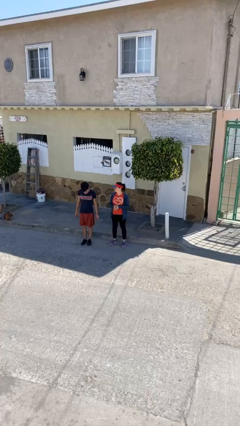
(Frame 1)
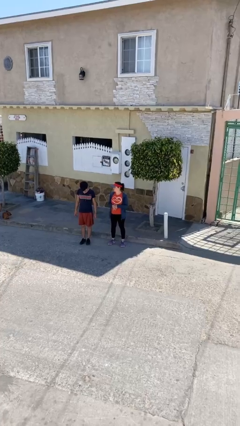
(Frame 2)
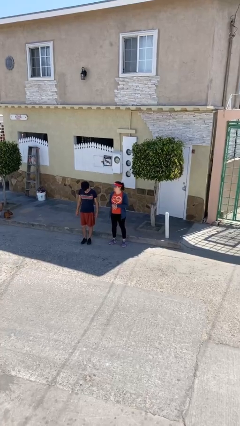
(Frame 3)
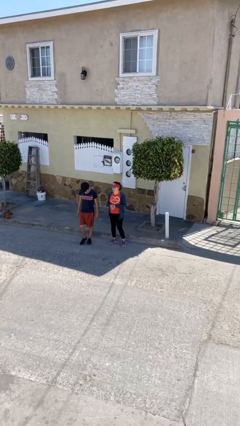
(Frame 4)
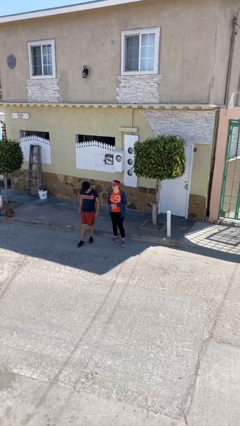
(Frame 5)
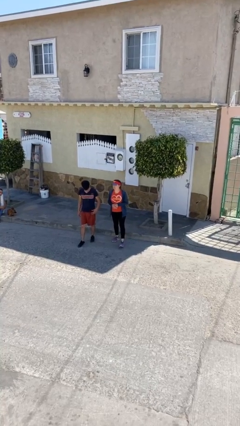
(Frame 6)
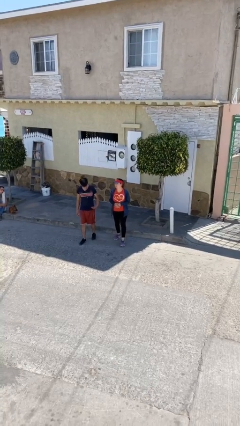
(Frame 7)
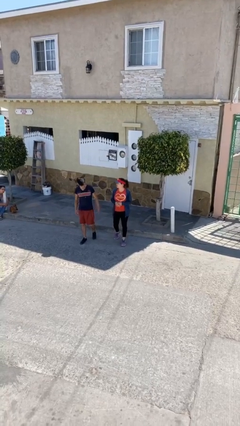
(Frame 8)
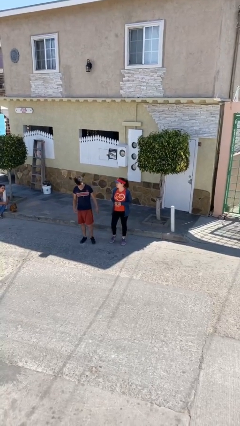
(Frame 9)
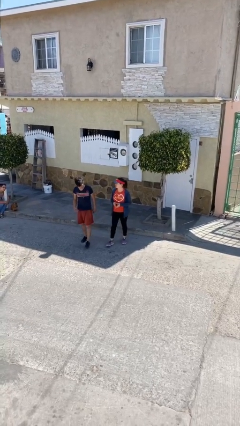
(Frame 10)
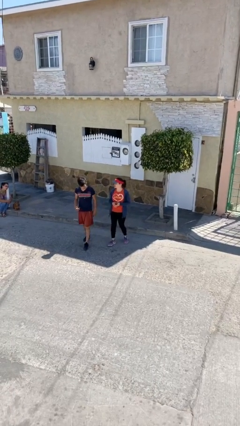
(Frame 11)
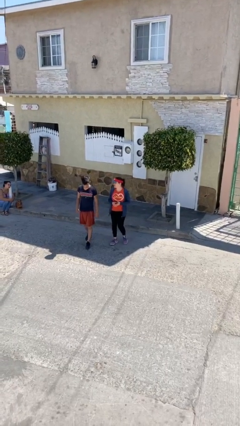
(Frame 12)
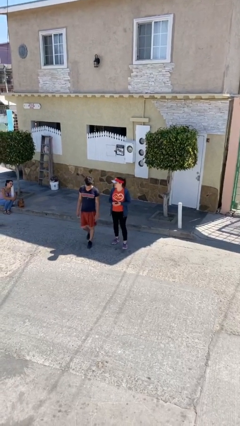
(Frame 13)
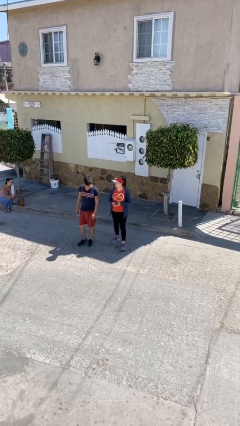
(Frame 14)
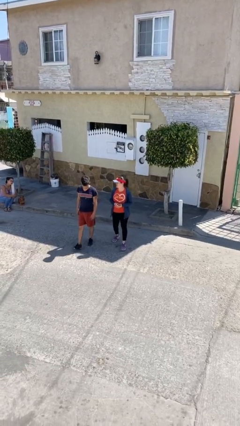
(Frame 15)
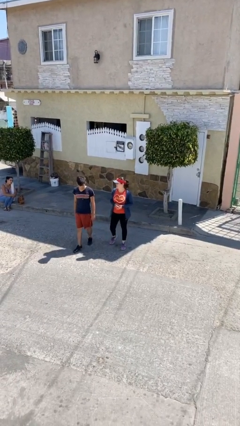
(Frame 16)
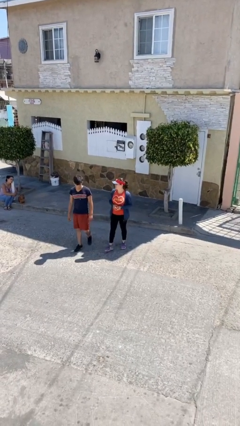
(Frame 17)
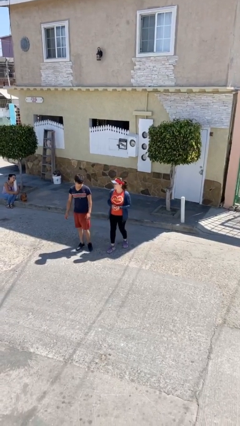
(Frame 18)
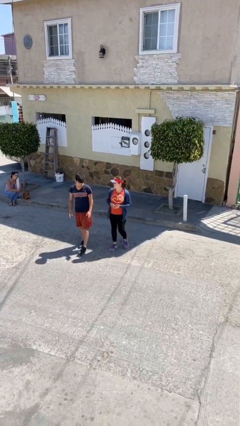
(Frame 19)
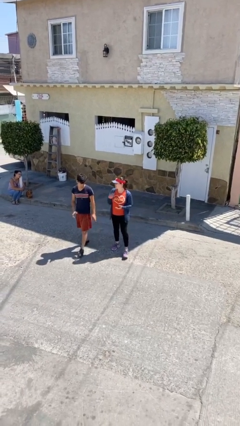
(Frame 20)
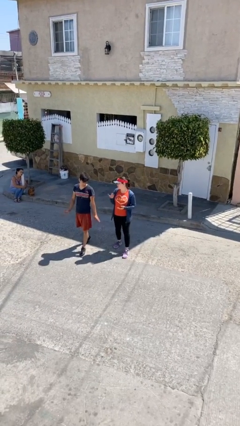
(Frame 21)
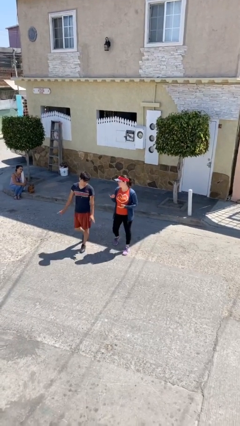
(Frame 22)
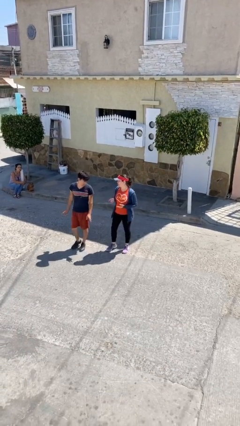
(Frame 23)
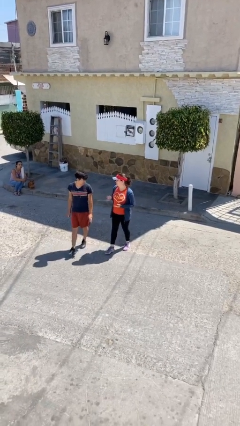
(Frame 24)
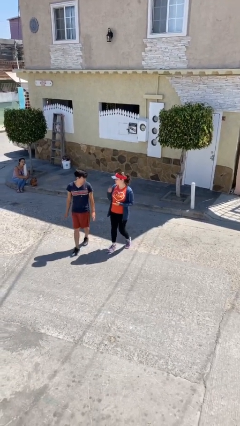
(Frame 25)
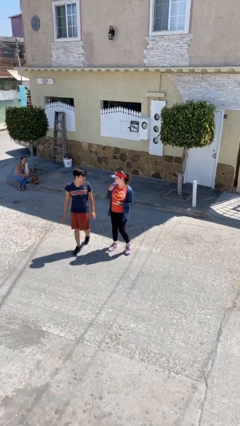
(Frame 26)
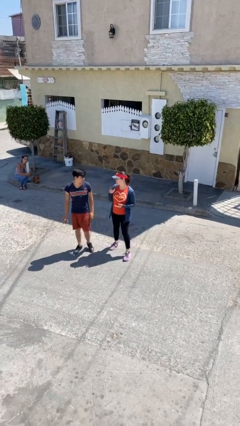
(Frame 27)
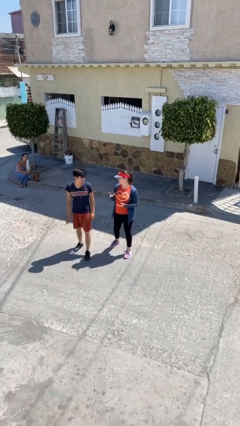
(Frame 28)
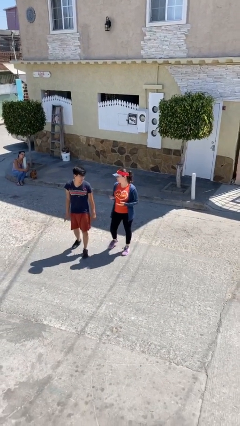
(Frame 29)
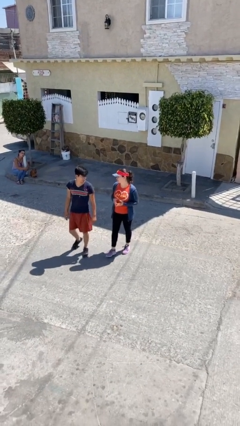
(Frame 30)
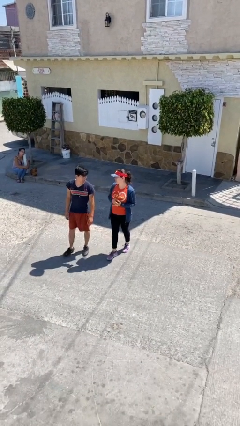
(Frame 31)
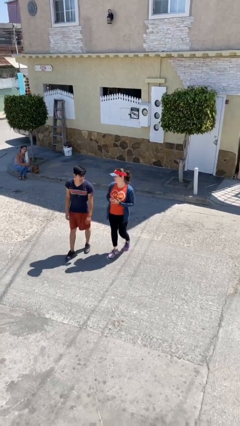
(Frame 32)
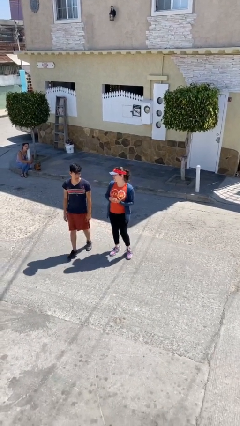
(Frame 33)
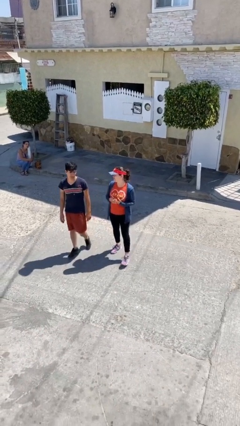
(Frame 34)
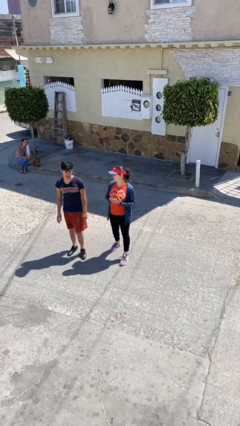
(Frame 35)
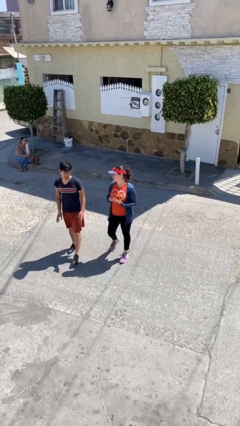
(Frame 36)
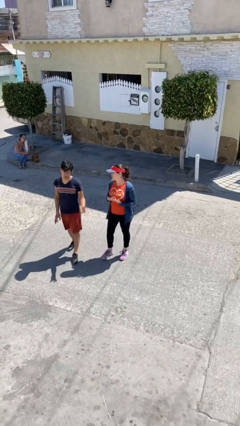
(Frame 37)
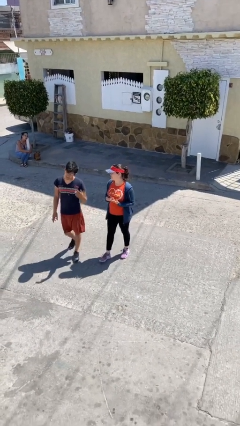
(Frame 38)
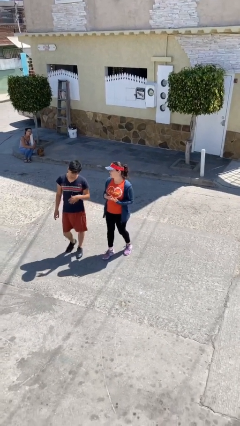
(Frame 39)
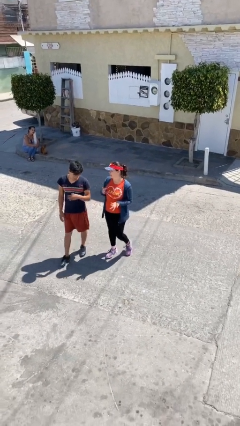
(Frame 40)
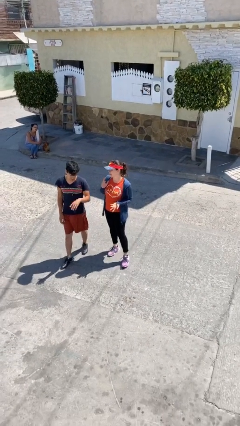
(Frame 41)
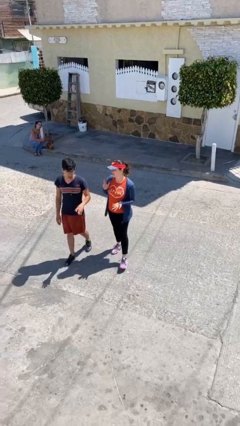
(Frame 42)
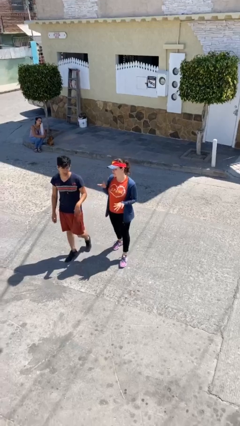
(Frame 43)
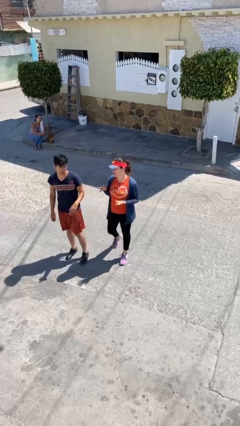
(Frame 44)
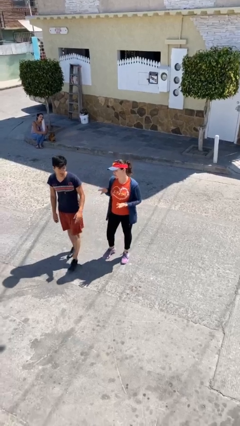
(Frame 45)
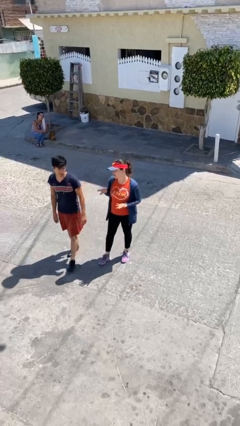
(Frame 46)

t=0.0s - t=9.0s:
person talks to person

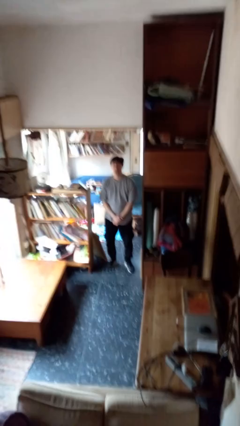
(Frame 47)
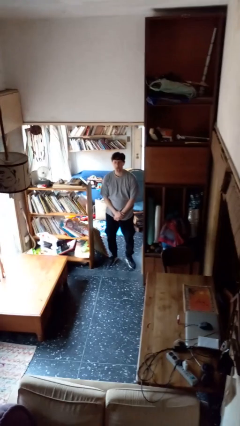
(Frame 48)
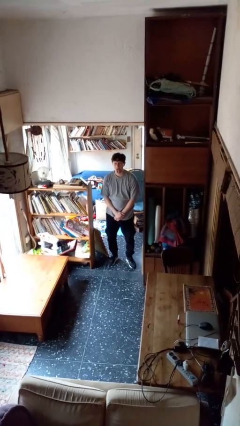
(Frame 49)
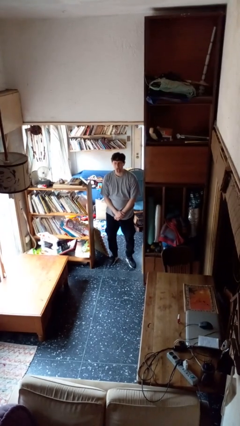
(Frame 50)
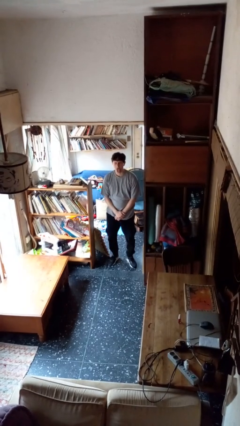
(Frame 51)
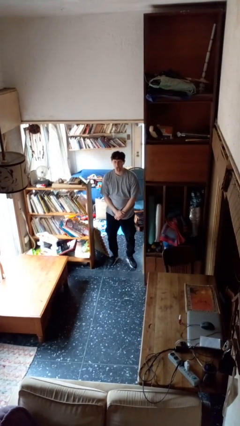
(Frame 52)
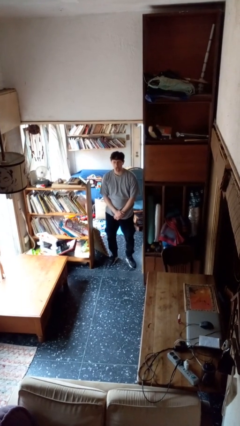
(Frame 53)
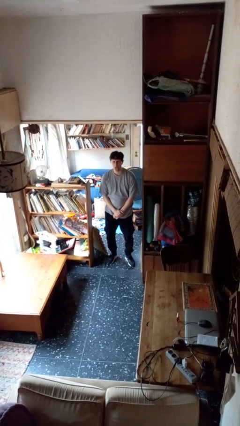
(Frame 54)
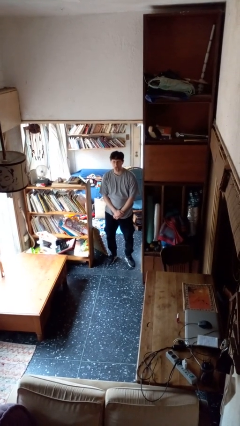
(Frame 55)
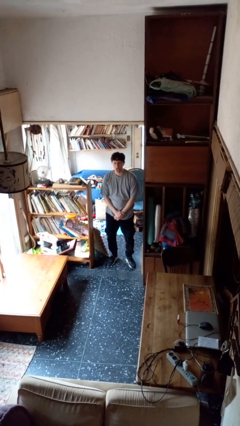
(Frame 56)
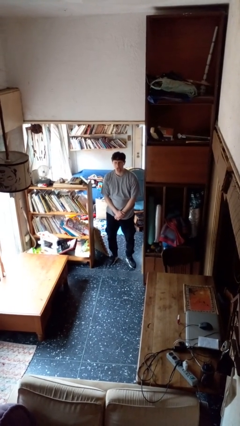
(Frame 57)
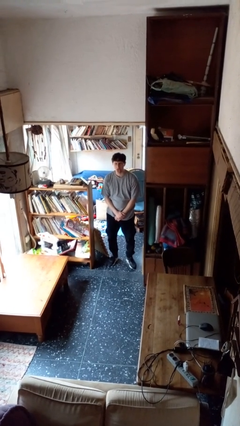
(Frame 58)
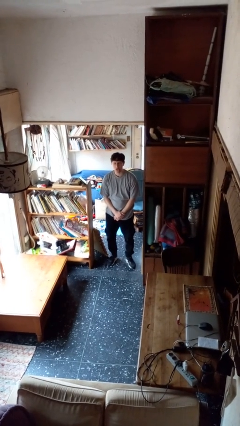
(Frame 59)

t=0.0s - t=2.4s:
person sticks out tongue

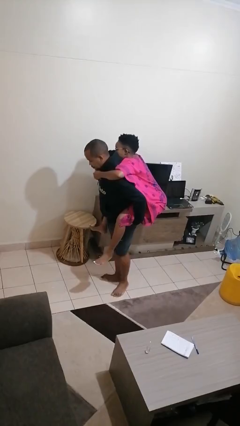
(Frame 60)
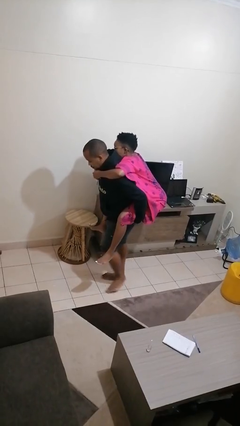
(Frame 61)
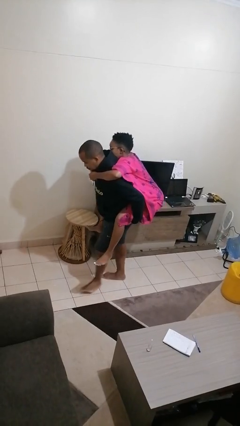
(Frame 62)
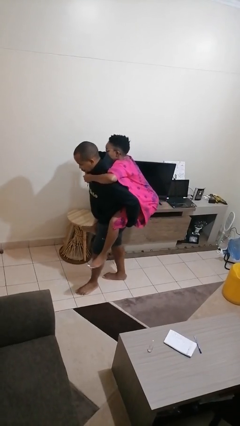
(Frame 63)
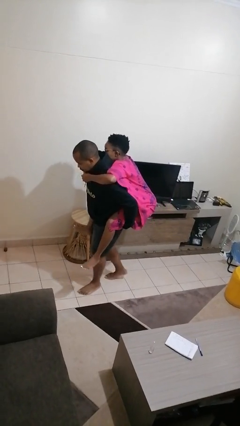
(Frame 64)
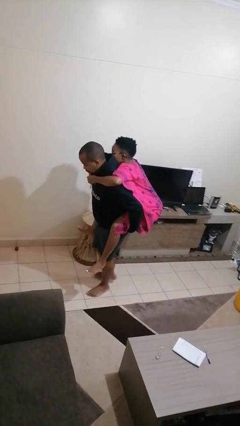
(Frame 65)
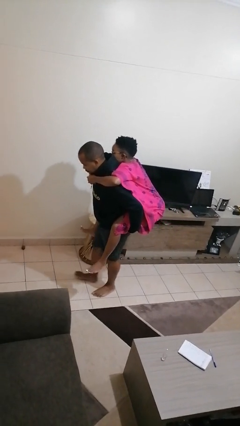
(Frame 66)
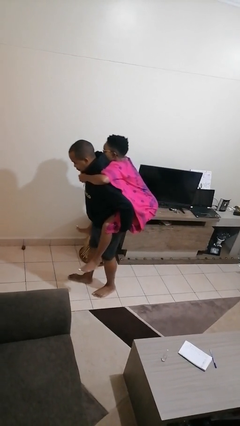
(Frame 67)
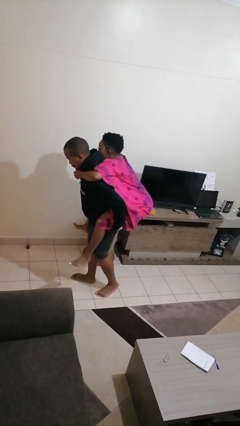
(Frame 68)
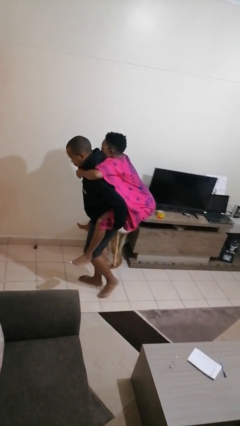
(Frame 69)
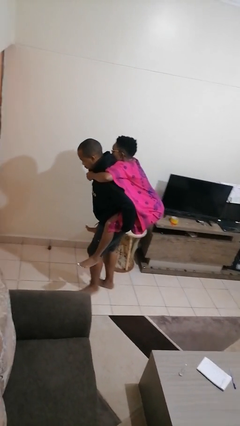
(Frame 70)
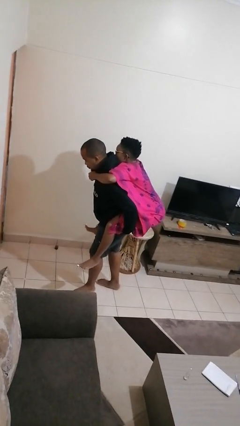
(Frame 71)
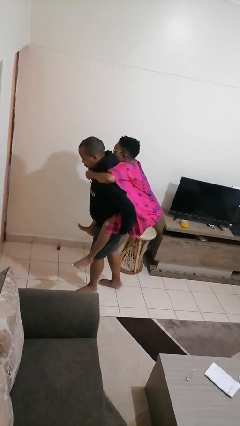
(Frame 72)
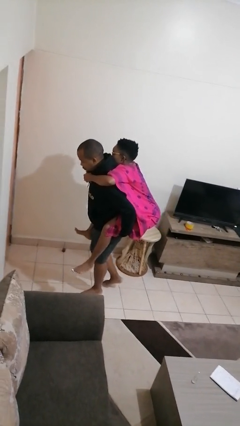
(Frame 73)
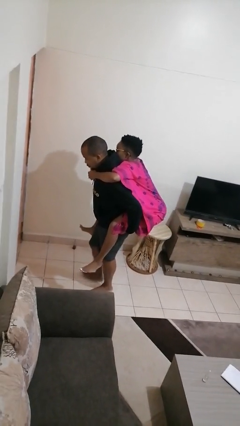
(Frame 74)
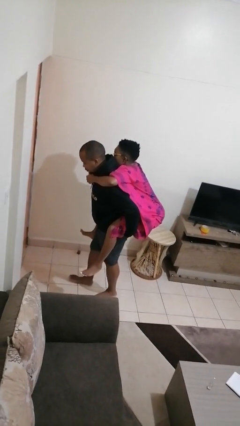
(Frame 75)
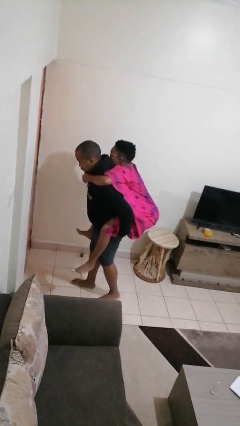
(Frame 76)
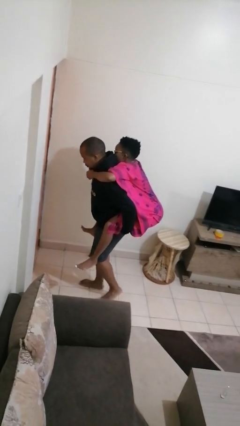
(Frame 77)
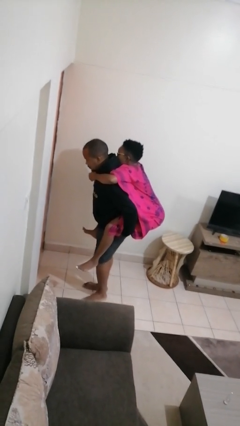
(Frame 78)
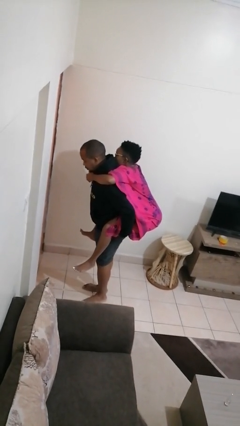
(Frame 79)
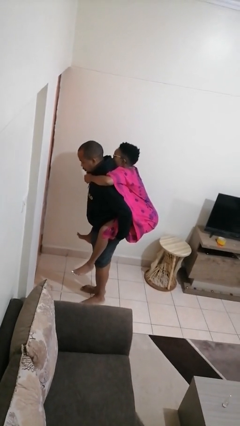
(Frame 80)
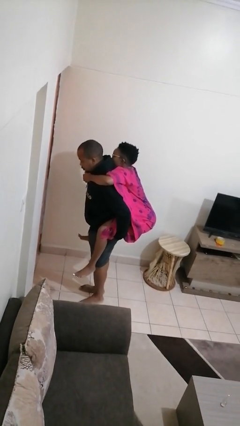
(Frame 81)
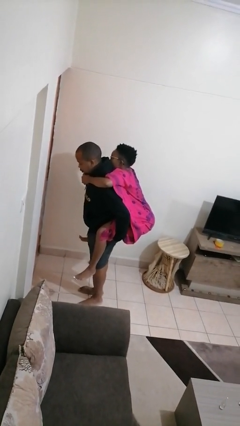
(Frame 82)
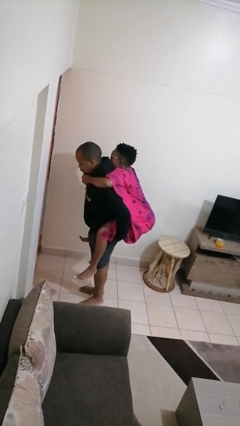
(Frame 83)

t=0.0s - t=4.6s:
person carries person on back

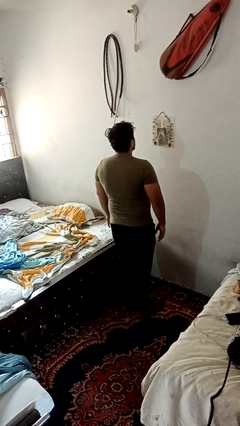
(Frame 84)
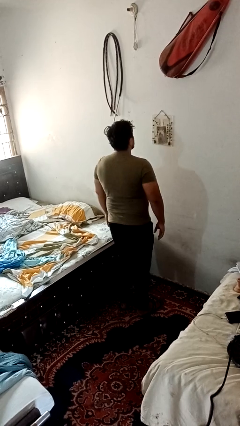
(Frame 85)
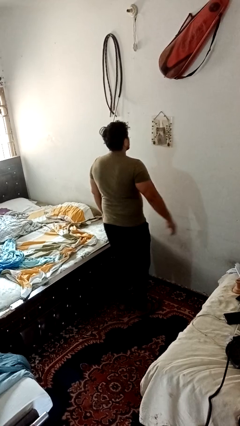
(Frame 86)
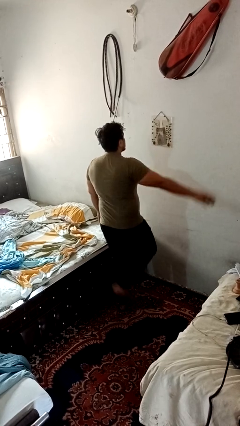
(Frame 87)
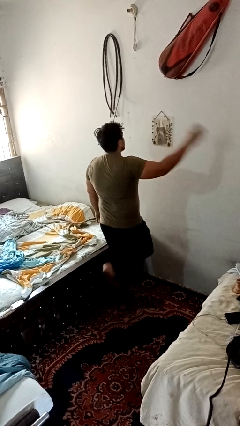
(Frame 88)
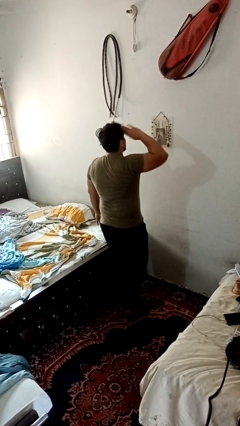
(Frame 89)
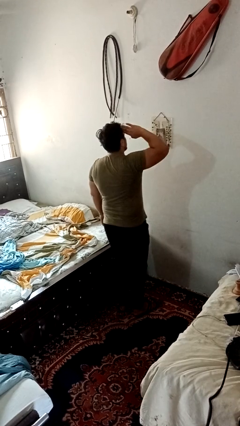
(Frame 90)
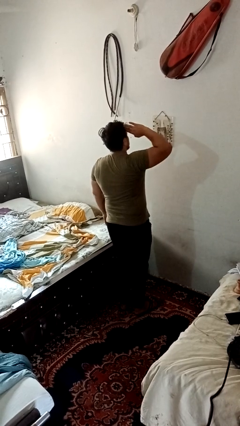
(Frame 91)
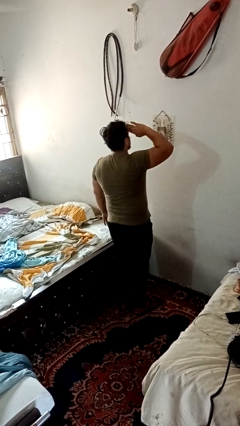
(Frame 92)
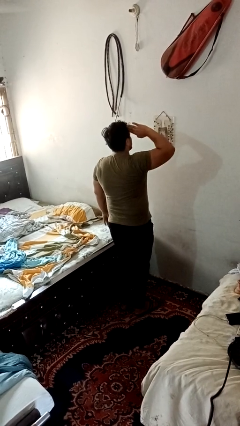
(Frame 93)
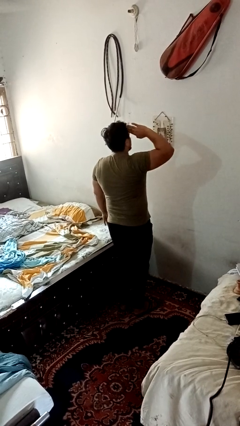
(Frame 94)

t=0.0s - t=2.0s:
person salutes

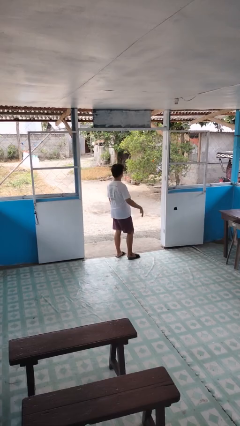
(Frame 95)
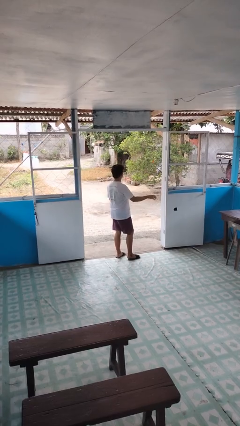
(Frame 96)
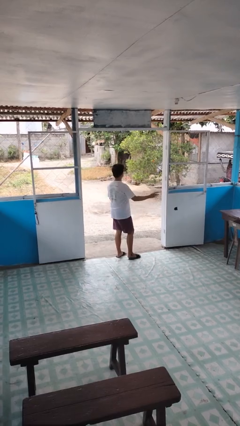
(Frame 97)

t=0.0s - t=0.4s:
person slaps hands on thighs
